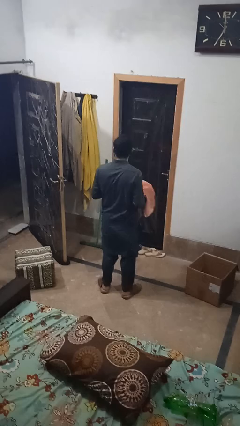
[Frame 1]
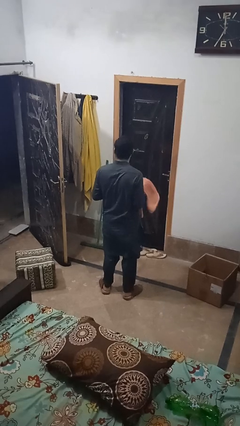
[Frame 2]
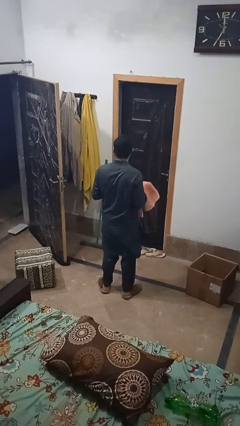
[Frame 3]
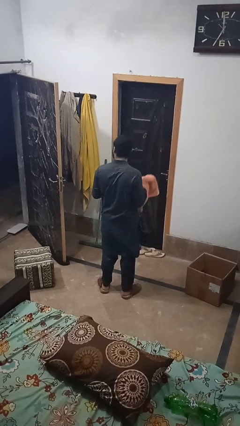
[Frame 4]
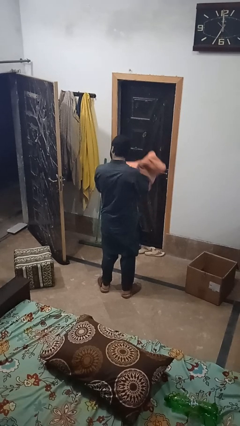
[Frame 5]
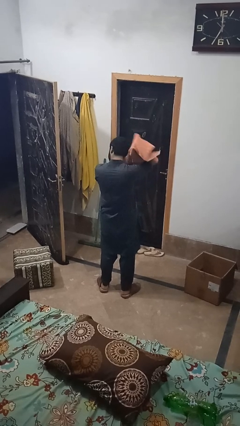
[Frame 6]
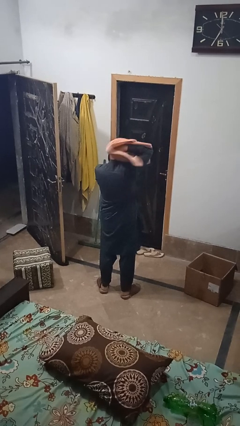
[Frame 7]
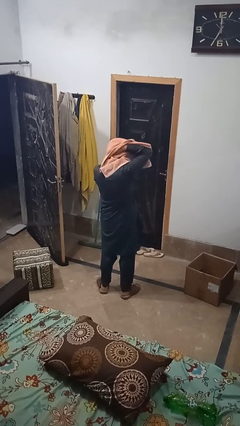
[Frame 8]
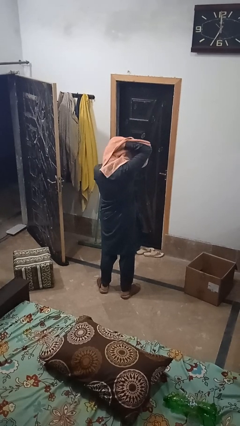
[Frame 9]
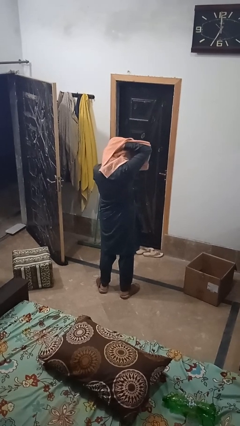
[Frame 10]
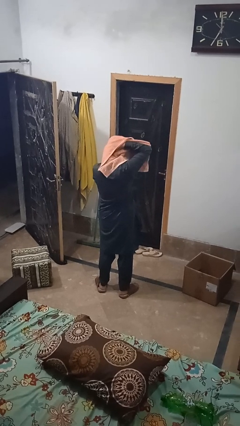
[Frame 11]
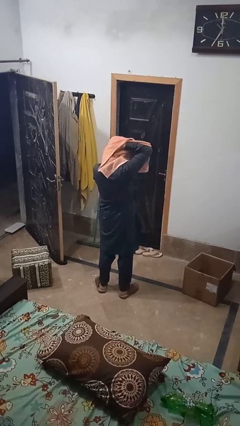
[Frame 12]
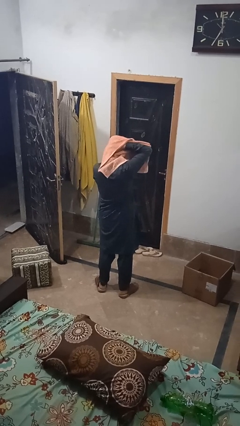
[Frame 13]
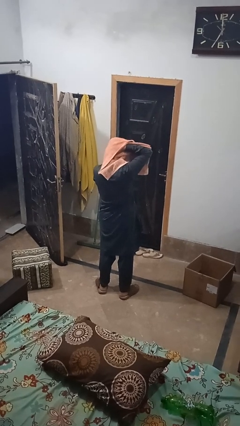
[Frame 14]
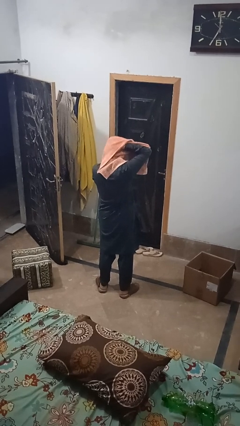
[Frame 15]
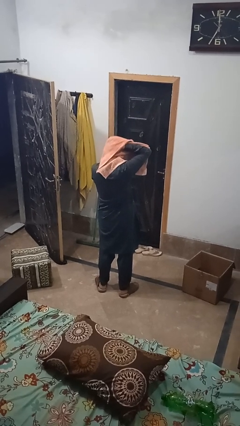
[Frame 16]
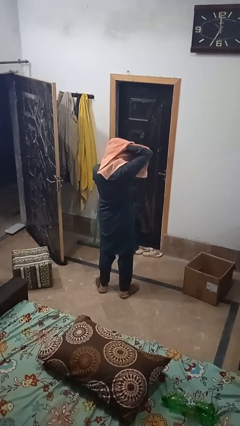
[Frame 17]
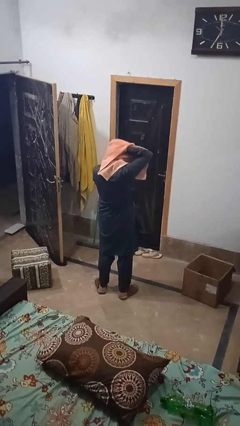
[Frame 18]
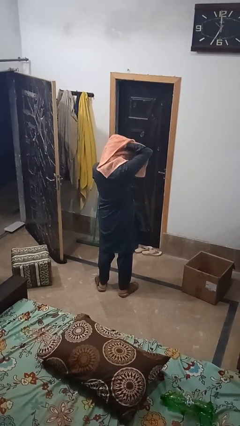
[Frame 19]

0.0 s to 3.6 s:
person dries hair with towel

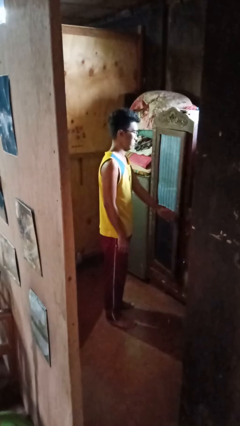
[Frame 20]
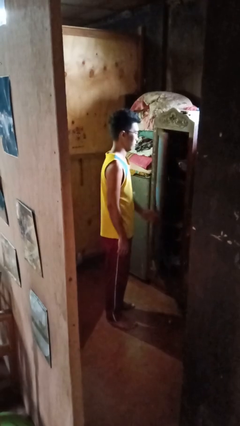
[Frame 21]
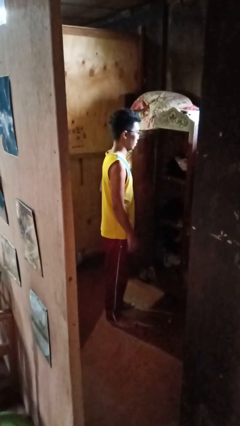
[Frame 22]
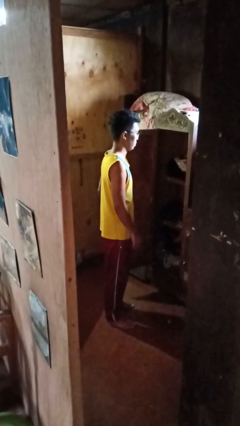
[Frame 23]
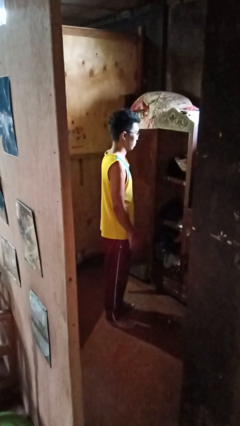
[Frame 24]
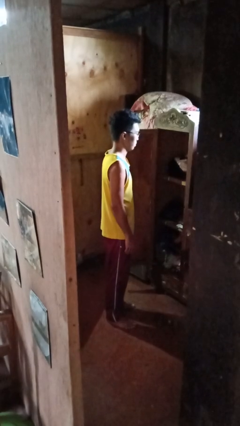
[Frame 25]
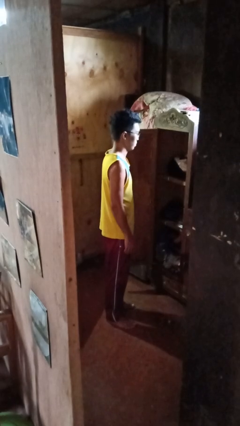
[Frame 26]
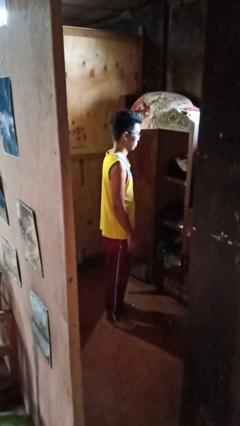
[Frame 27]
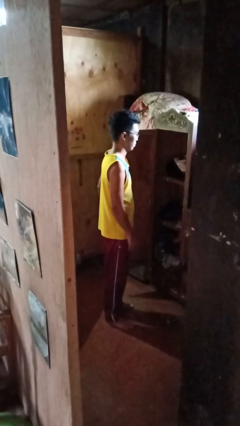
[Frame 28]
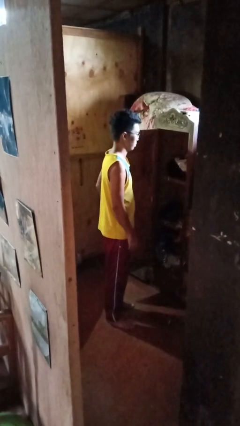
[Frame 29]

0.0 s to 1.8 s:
person opens closet door

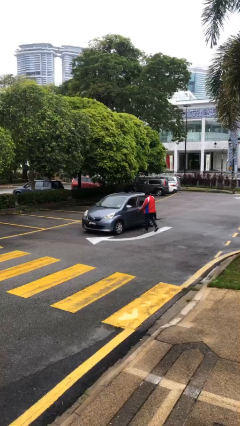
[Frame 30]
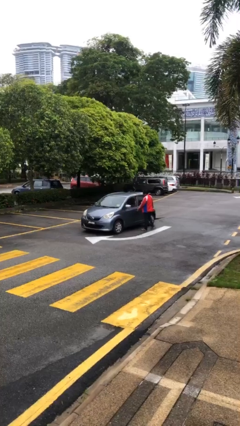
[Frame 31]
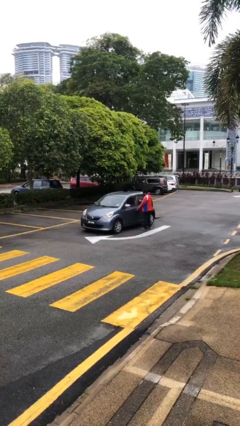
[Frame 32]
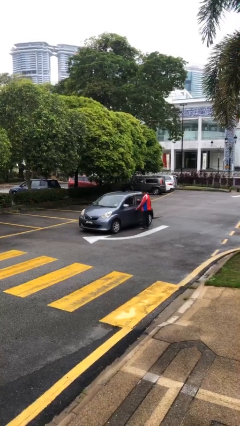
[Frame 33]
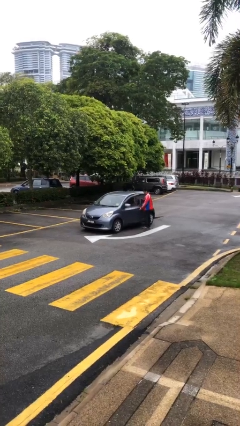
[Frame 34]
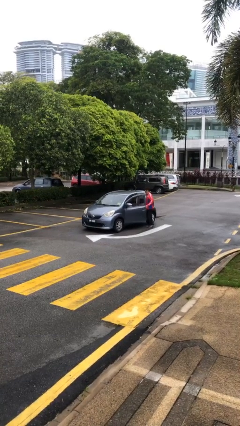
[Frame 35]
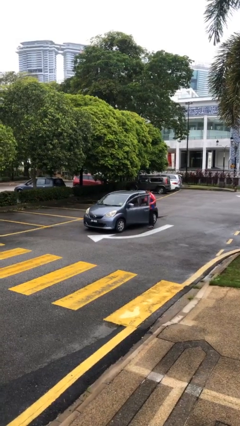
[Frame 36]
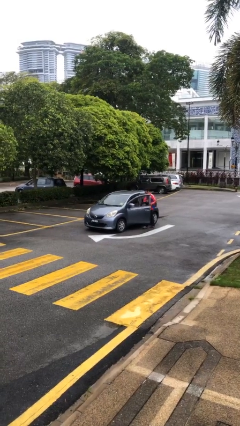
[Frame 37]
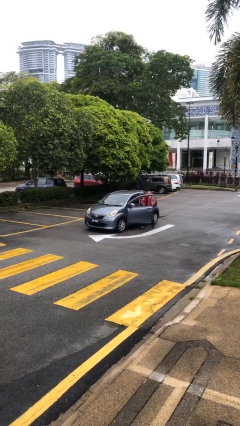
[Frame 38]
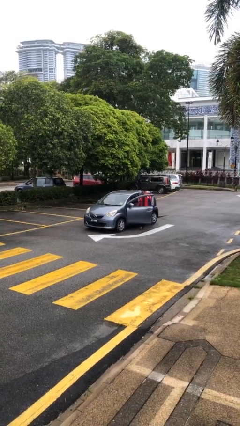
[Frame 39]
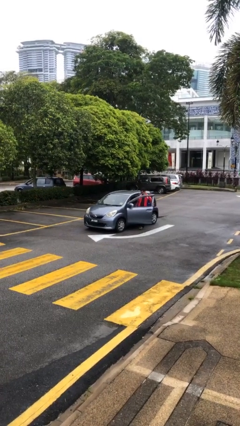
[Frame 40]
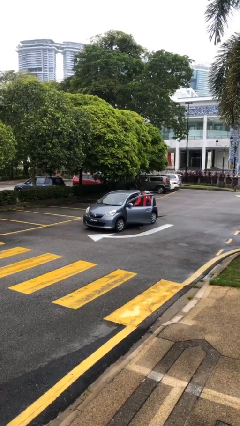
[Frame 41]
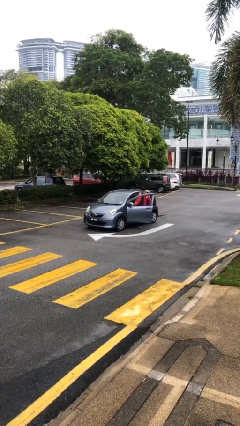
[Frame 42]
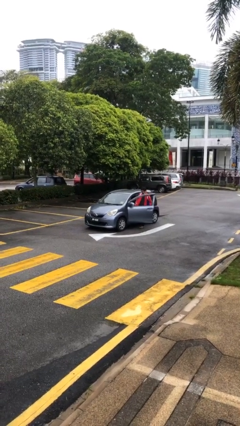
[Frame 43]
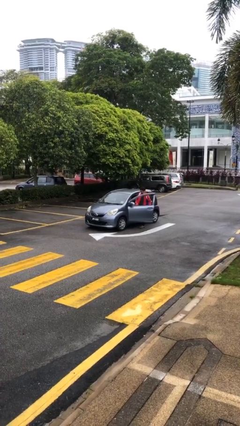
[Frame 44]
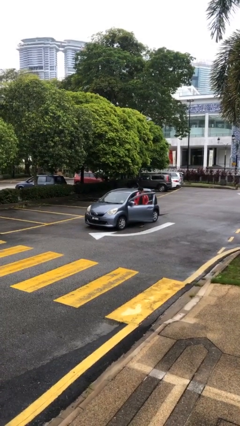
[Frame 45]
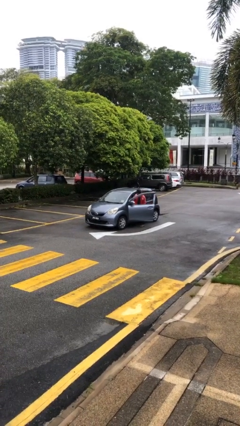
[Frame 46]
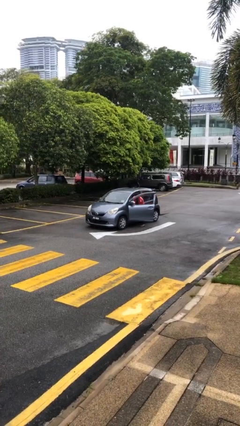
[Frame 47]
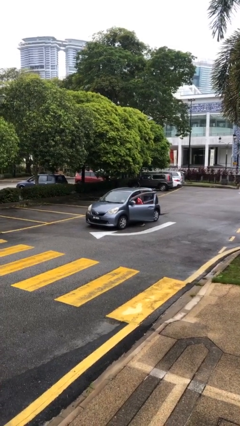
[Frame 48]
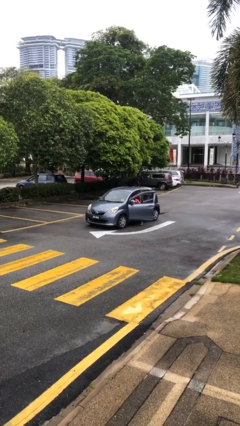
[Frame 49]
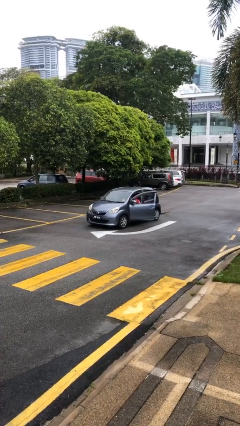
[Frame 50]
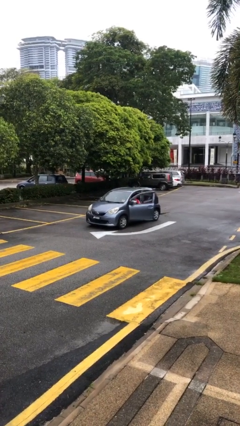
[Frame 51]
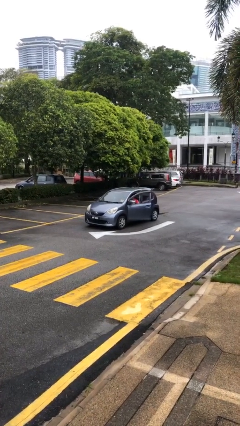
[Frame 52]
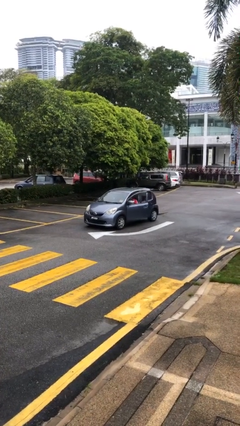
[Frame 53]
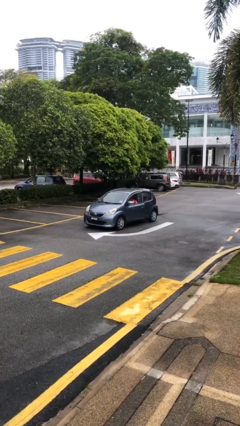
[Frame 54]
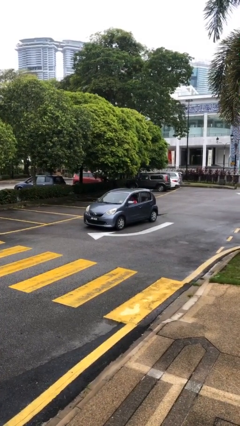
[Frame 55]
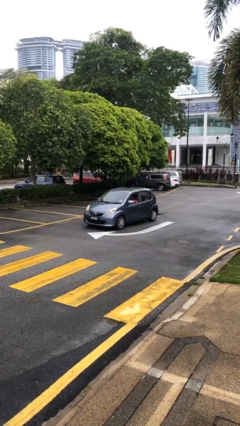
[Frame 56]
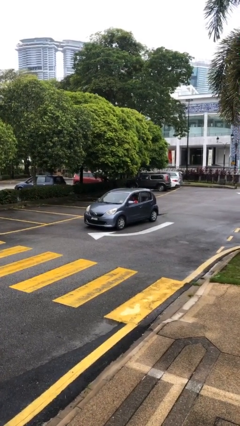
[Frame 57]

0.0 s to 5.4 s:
car picks up person

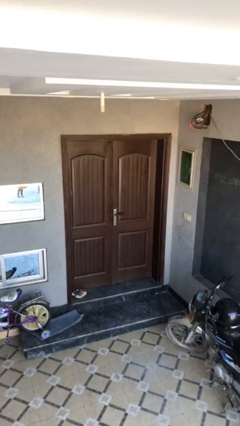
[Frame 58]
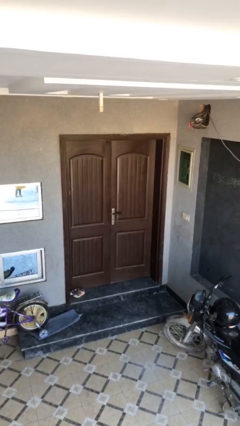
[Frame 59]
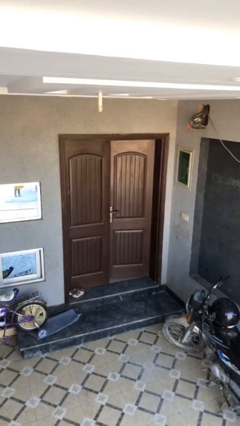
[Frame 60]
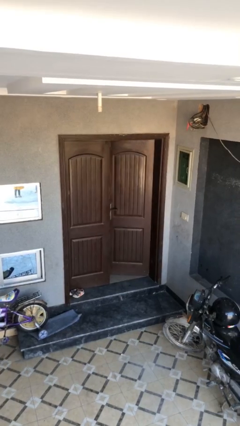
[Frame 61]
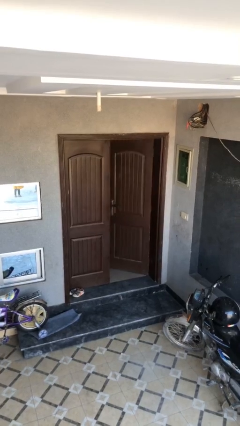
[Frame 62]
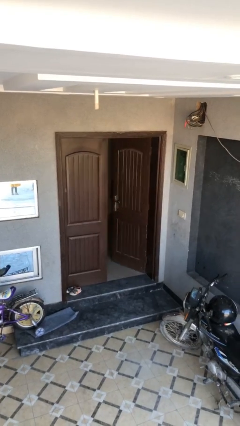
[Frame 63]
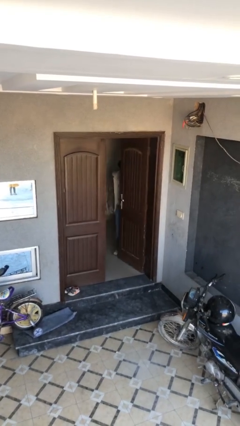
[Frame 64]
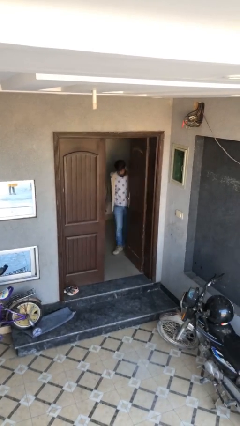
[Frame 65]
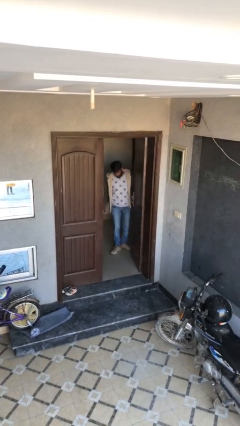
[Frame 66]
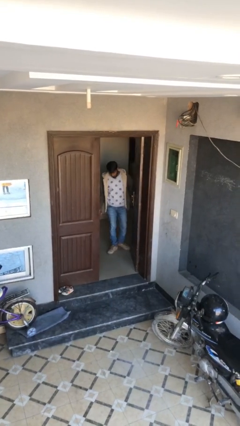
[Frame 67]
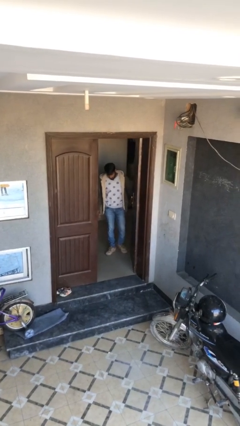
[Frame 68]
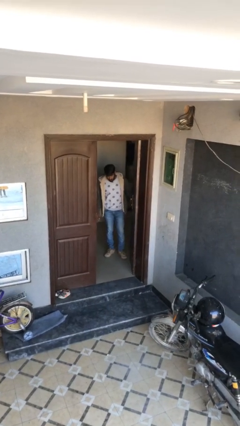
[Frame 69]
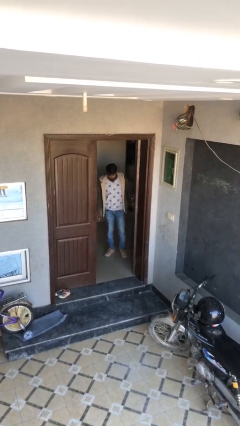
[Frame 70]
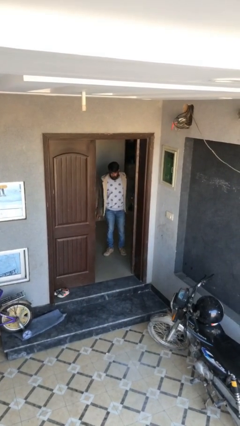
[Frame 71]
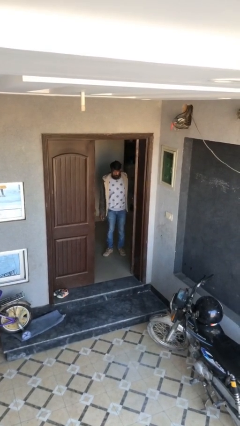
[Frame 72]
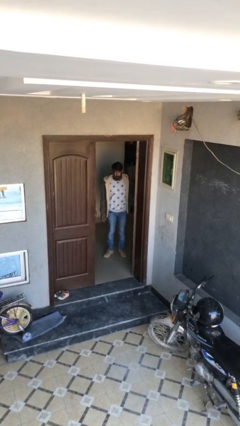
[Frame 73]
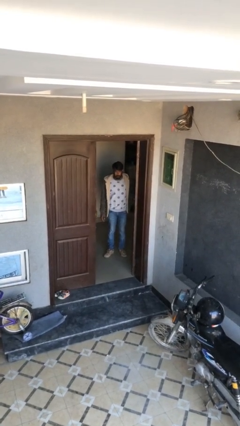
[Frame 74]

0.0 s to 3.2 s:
person opens facility door

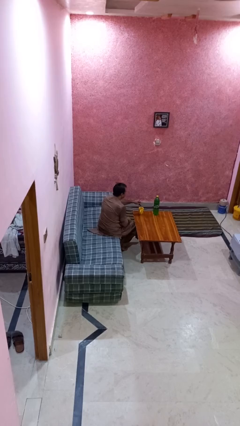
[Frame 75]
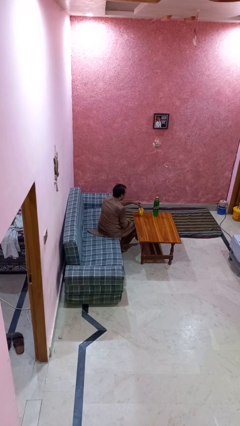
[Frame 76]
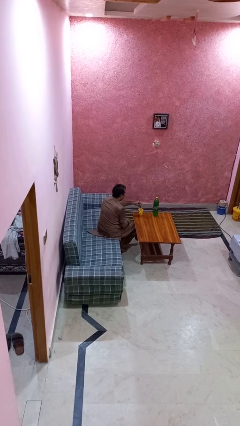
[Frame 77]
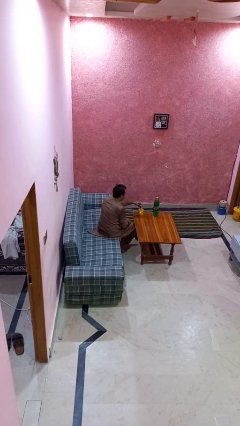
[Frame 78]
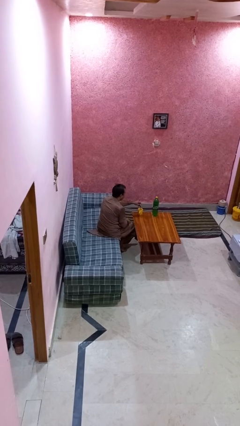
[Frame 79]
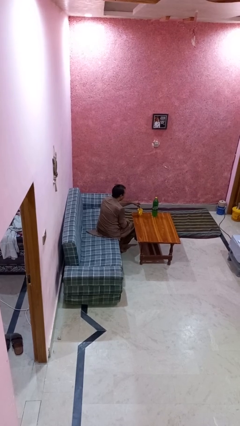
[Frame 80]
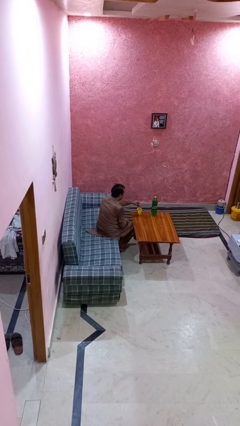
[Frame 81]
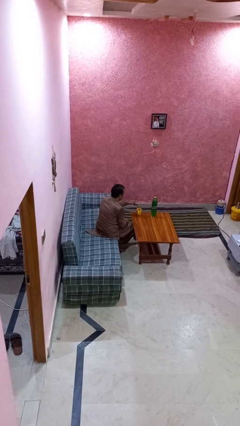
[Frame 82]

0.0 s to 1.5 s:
person stirs mug

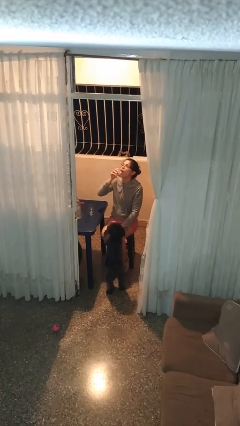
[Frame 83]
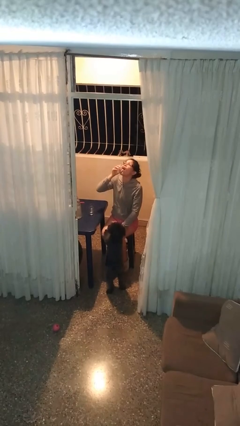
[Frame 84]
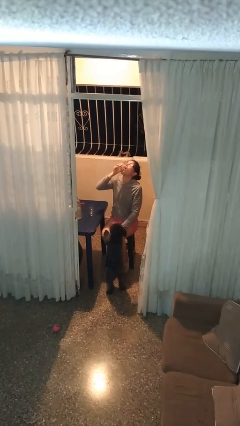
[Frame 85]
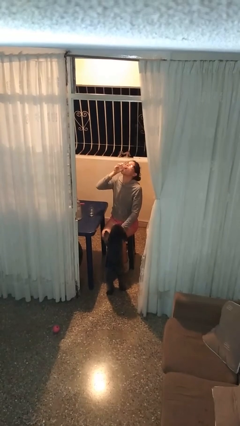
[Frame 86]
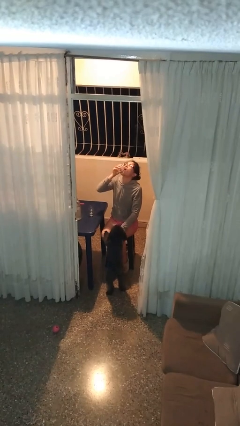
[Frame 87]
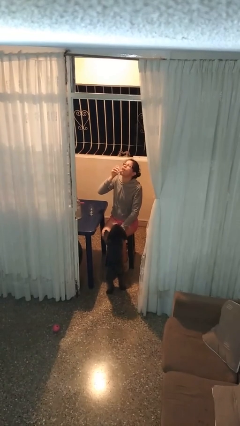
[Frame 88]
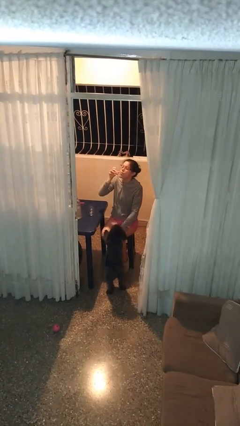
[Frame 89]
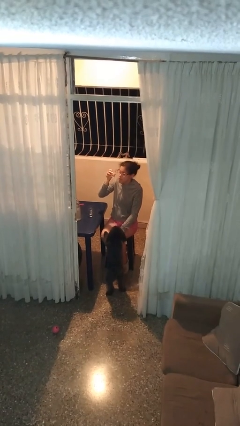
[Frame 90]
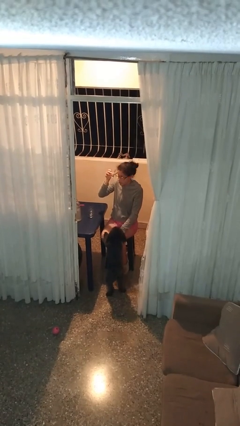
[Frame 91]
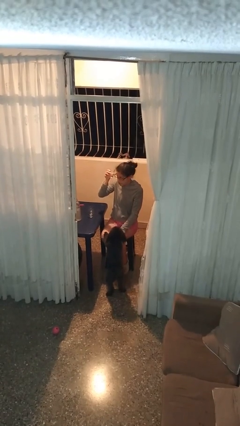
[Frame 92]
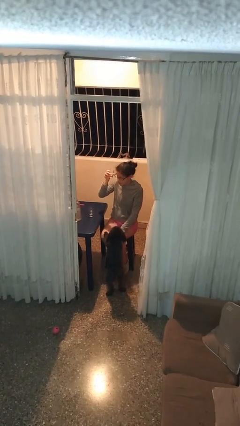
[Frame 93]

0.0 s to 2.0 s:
person drinks from shotglass
